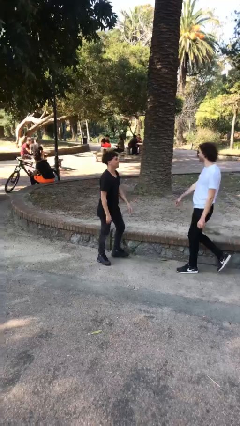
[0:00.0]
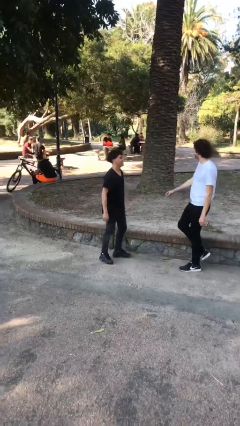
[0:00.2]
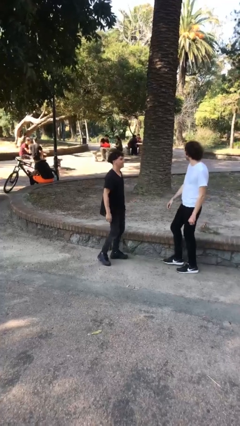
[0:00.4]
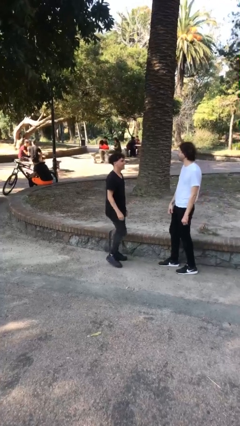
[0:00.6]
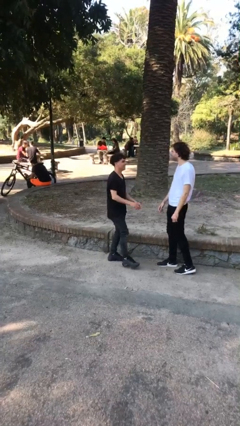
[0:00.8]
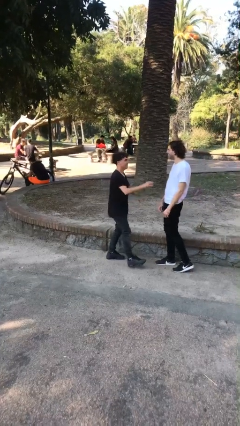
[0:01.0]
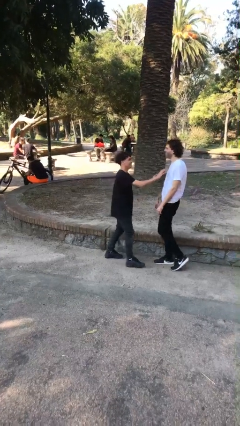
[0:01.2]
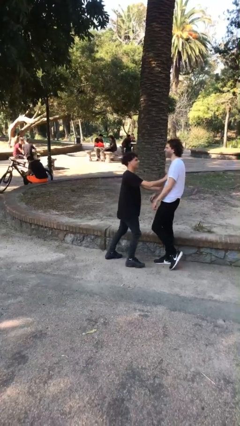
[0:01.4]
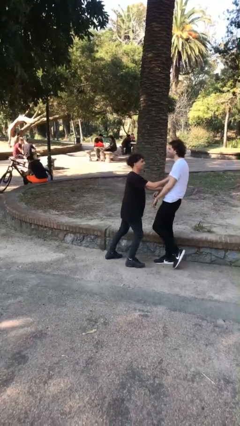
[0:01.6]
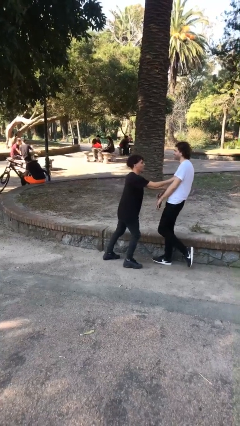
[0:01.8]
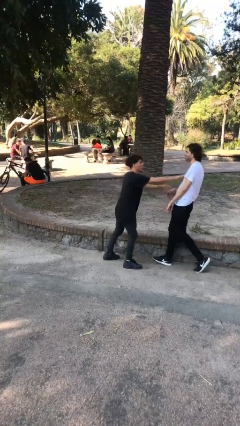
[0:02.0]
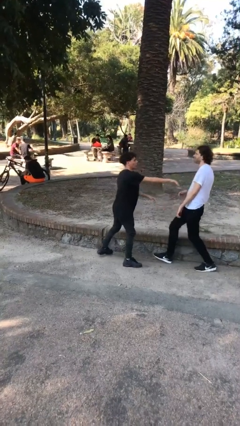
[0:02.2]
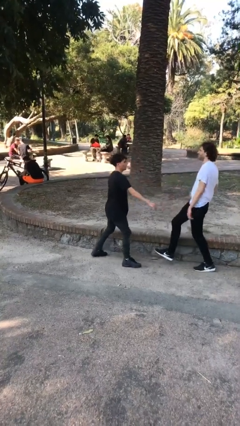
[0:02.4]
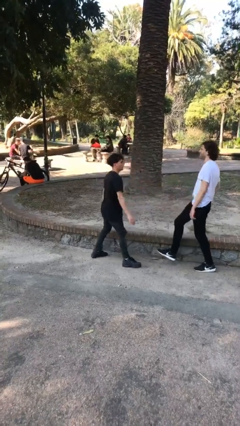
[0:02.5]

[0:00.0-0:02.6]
person shoves person

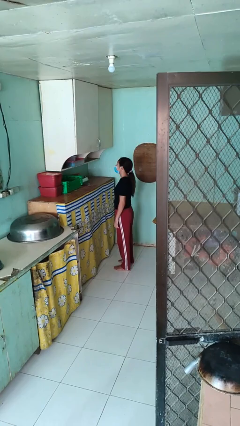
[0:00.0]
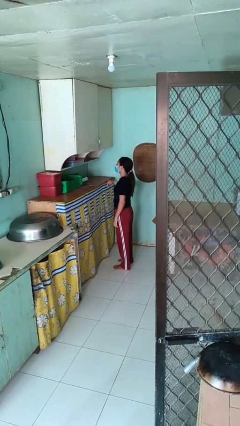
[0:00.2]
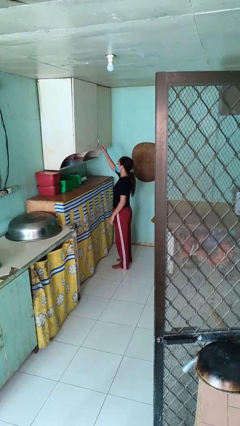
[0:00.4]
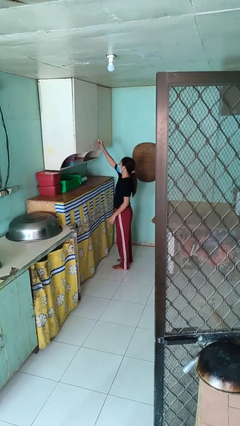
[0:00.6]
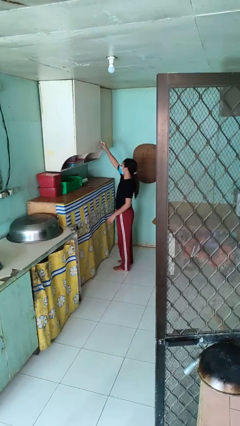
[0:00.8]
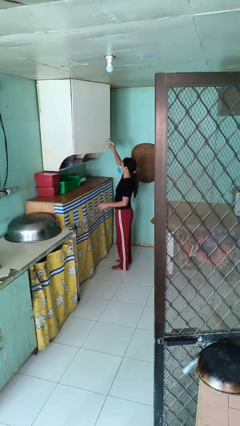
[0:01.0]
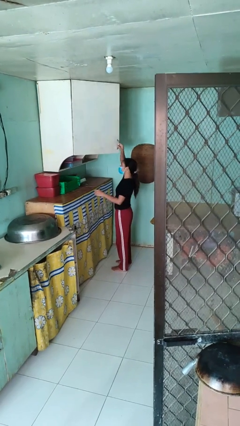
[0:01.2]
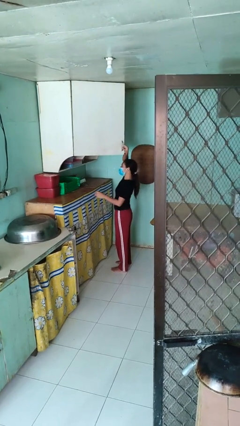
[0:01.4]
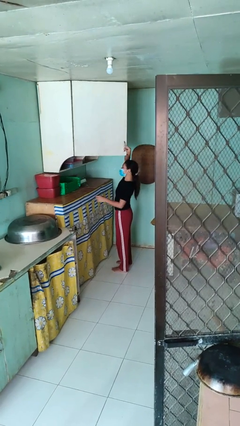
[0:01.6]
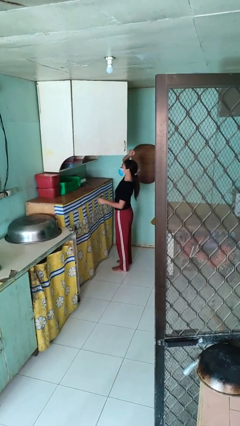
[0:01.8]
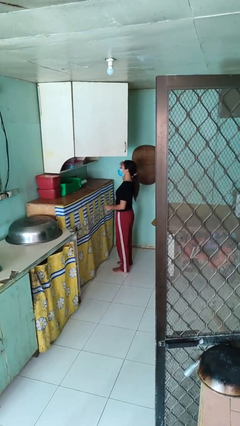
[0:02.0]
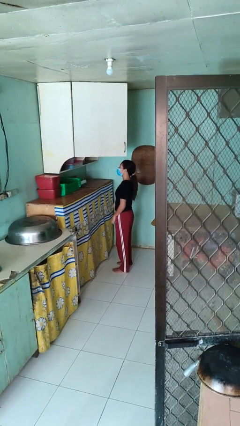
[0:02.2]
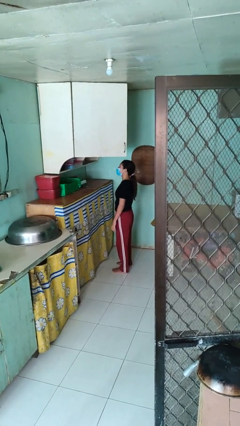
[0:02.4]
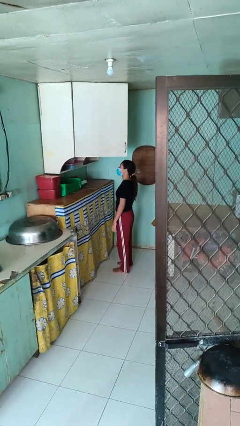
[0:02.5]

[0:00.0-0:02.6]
person opens cabinet

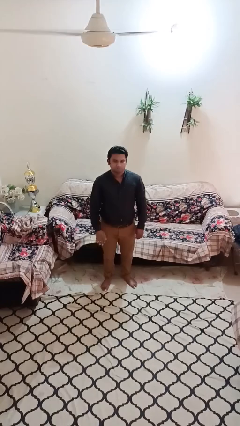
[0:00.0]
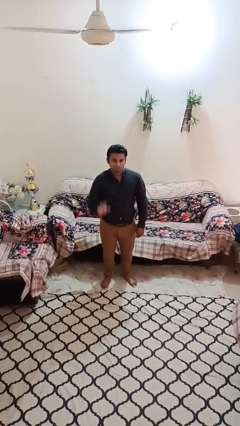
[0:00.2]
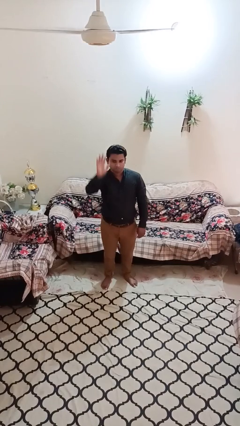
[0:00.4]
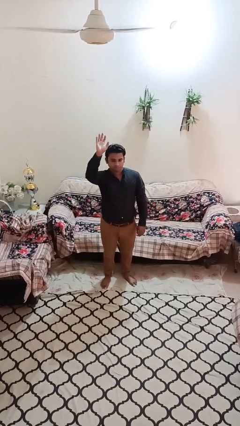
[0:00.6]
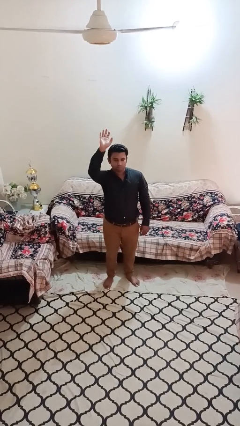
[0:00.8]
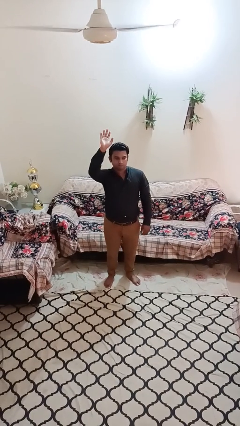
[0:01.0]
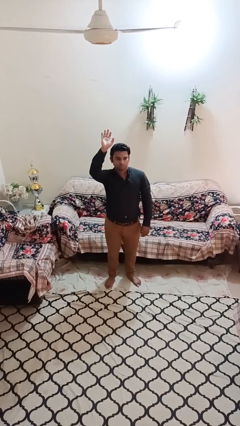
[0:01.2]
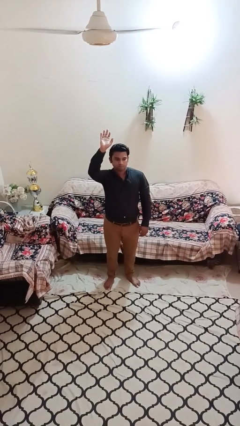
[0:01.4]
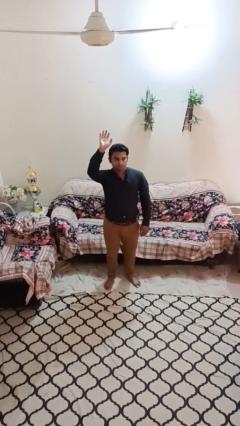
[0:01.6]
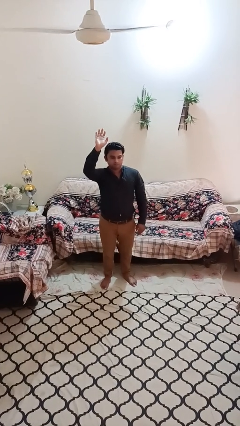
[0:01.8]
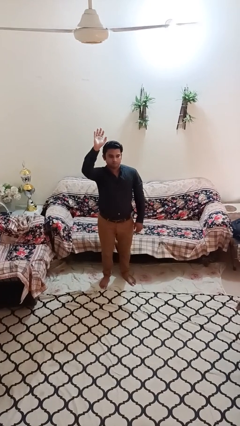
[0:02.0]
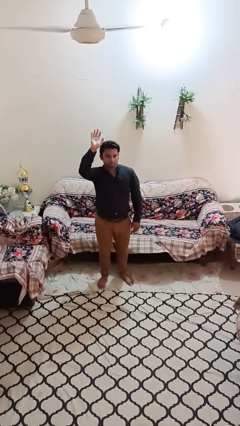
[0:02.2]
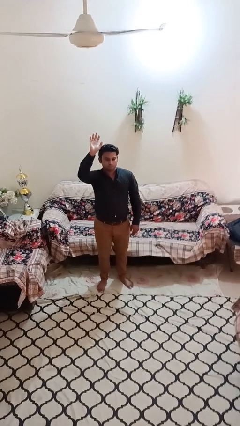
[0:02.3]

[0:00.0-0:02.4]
person gestures raise hand

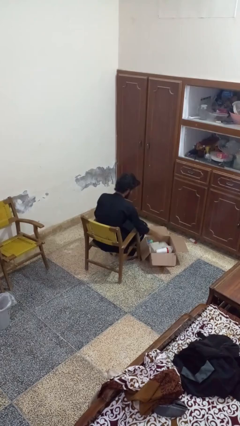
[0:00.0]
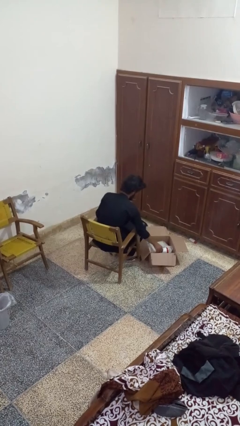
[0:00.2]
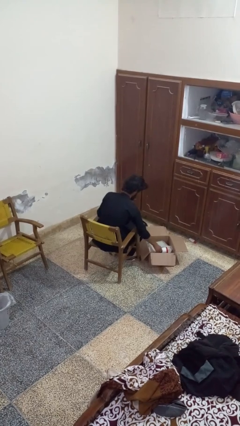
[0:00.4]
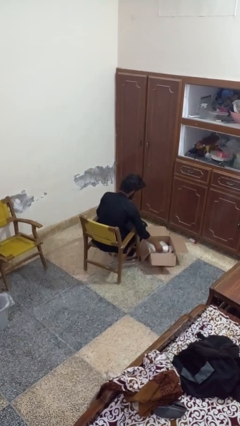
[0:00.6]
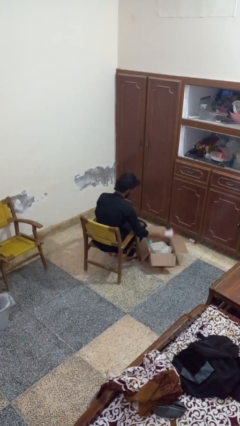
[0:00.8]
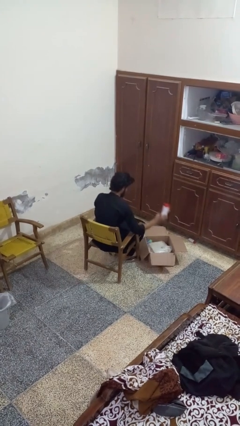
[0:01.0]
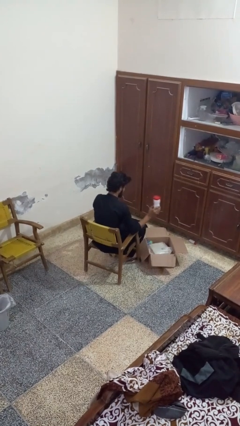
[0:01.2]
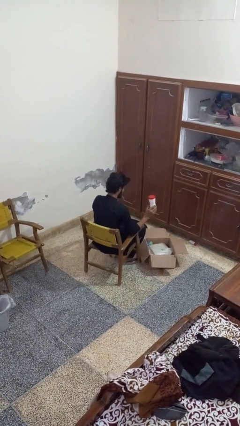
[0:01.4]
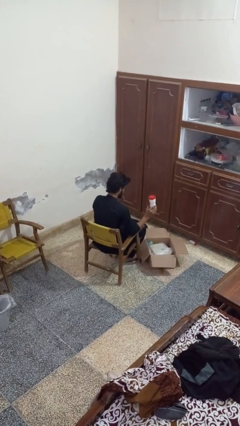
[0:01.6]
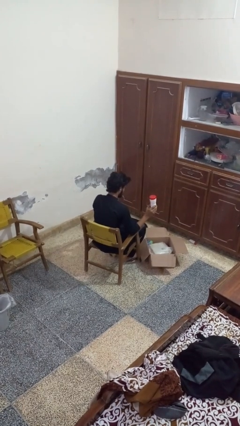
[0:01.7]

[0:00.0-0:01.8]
person takes object from box

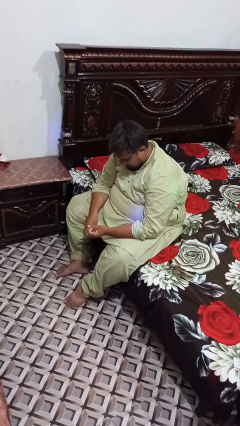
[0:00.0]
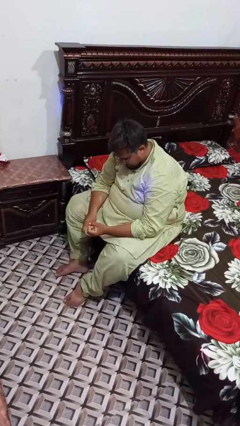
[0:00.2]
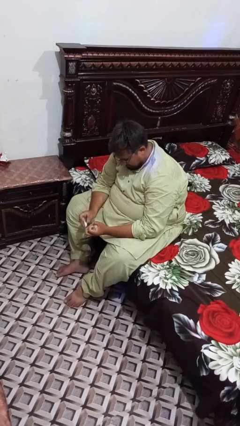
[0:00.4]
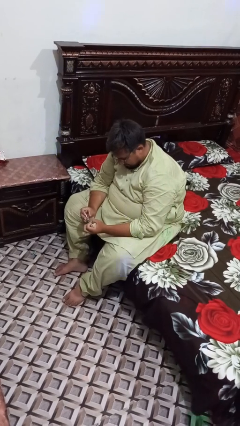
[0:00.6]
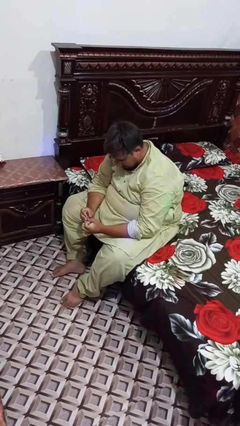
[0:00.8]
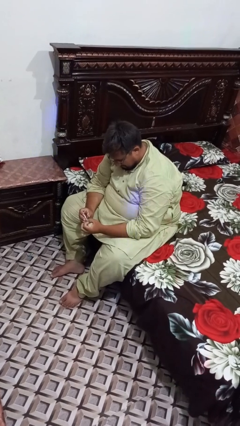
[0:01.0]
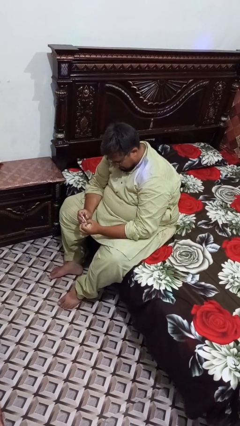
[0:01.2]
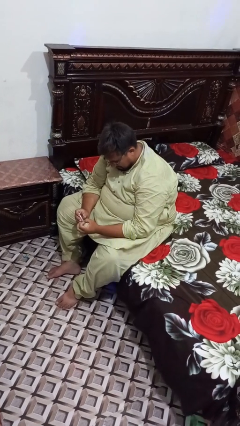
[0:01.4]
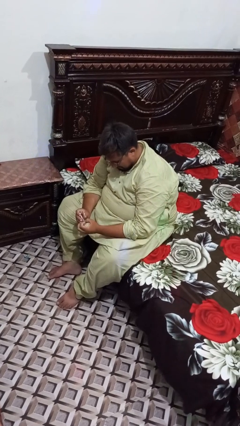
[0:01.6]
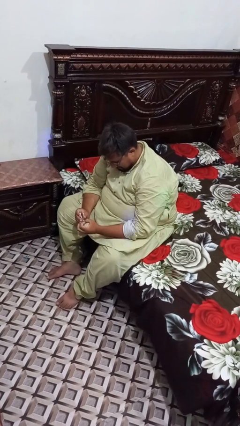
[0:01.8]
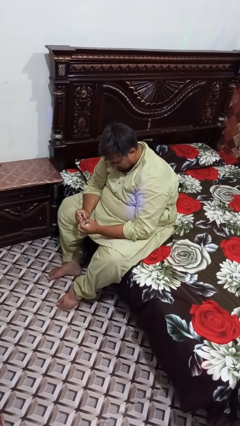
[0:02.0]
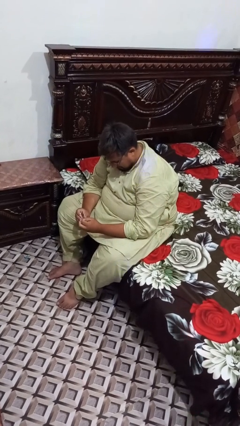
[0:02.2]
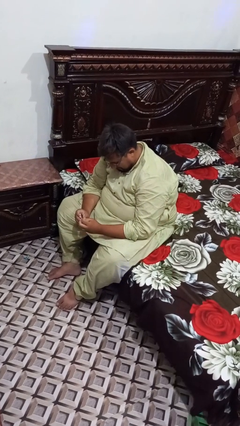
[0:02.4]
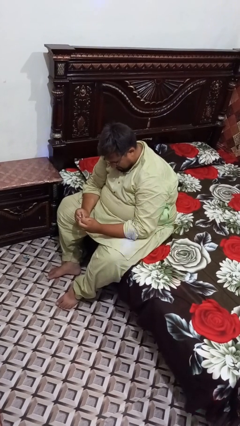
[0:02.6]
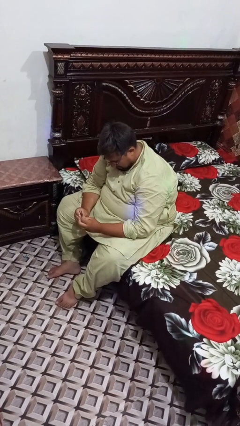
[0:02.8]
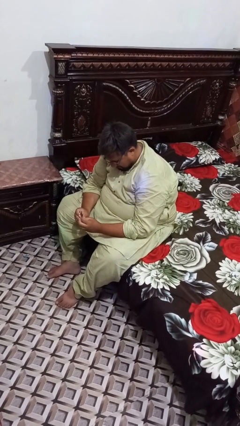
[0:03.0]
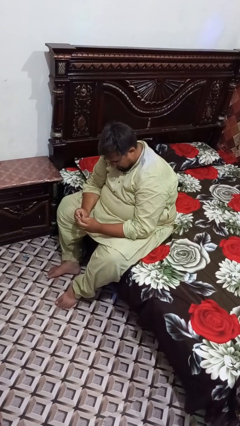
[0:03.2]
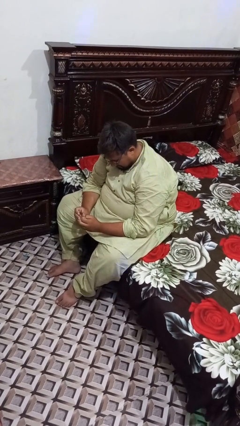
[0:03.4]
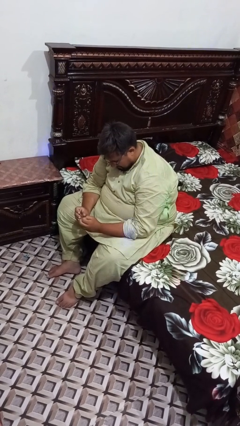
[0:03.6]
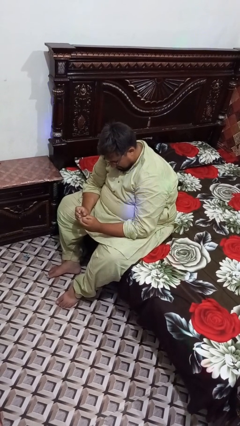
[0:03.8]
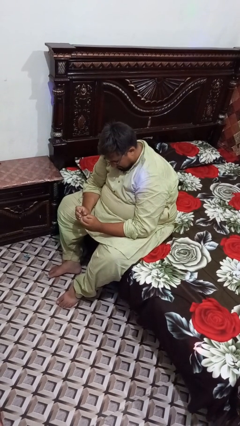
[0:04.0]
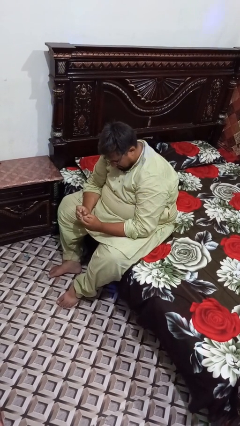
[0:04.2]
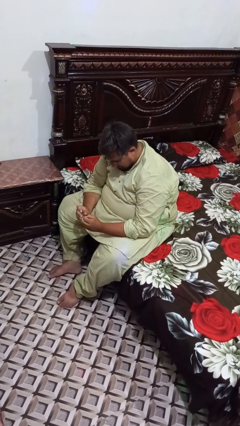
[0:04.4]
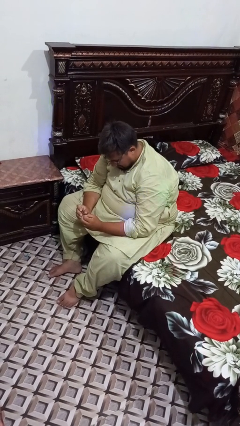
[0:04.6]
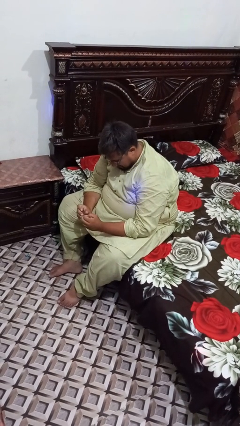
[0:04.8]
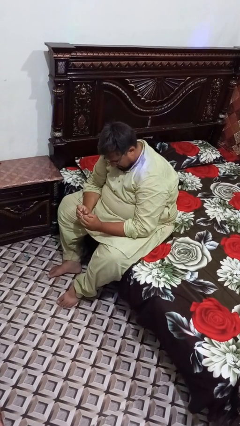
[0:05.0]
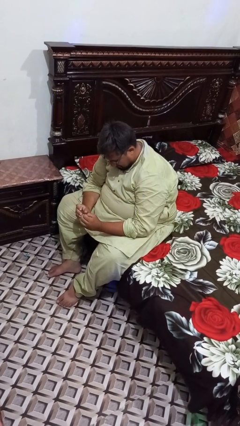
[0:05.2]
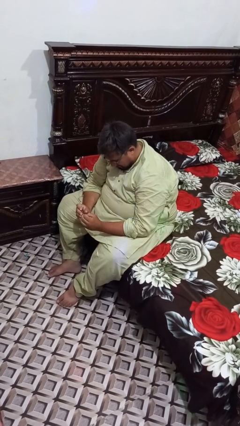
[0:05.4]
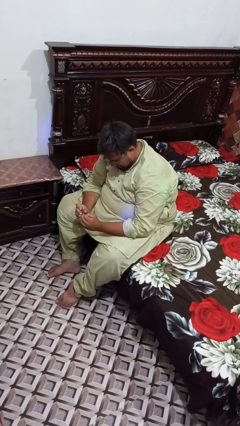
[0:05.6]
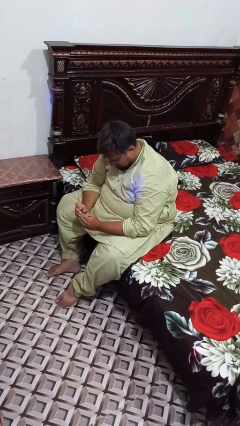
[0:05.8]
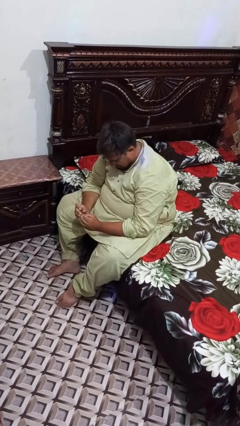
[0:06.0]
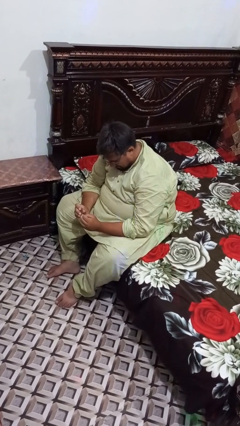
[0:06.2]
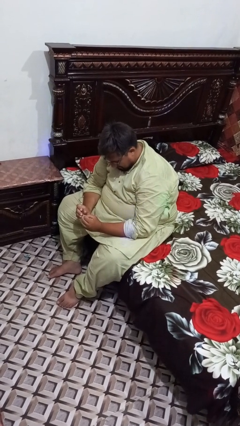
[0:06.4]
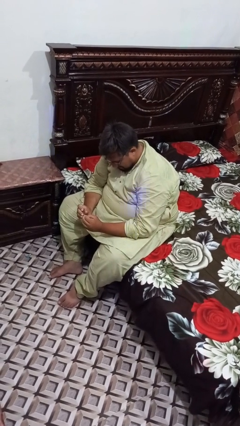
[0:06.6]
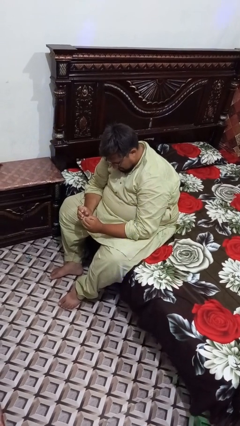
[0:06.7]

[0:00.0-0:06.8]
person files fingernails

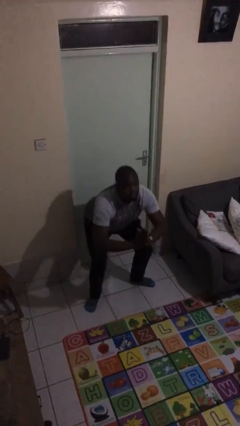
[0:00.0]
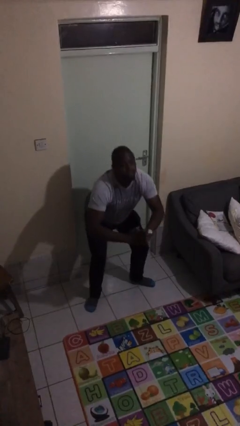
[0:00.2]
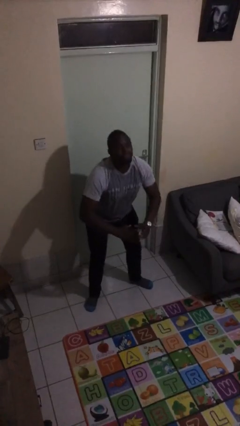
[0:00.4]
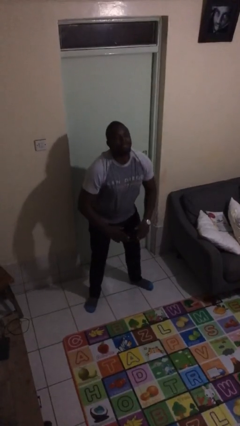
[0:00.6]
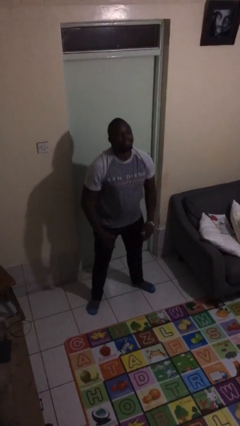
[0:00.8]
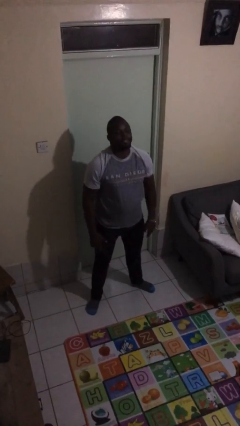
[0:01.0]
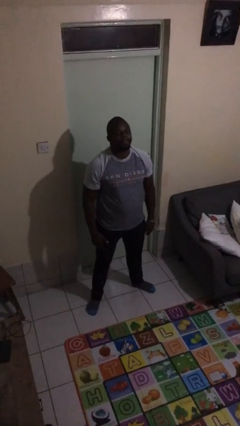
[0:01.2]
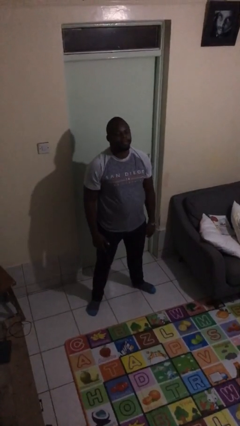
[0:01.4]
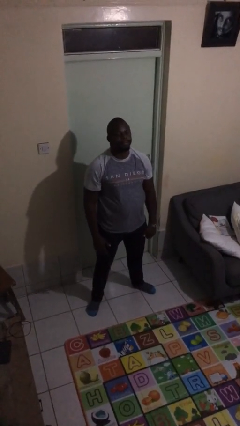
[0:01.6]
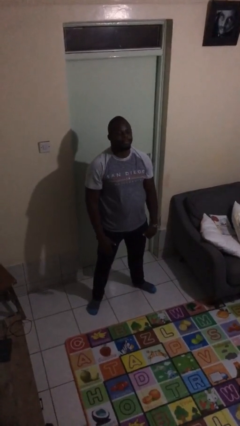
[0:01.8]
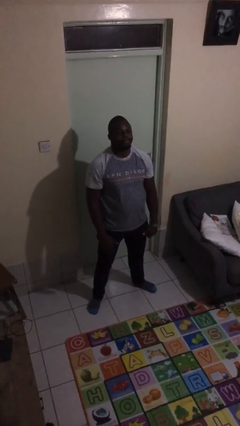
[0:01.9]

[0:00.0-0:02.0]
person stands up
